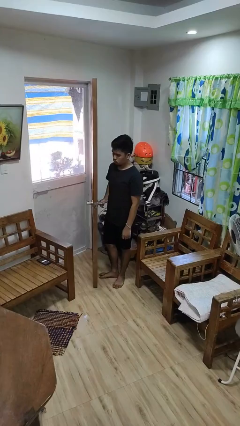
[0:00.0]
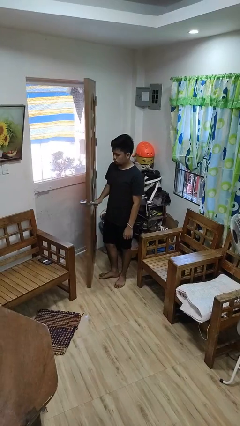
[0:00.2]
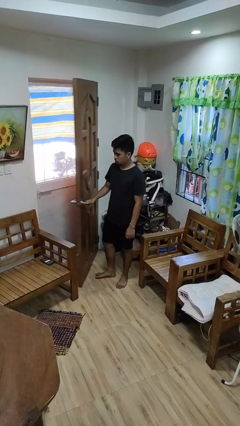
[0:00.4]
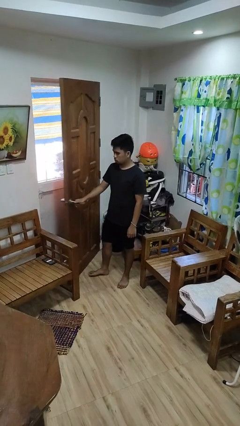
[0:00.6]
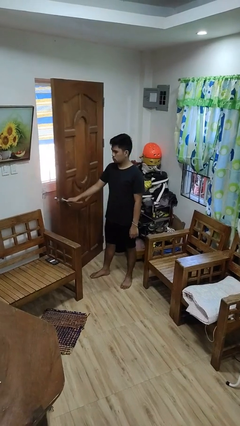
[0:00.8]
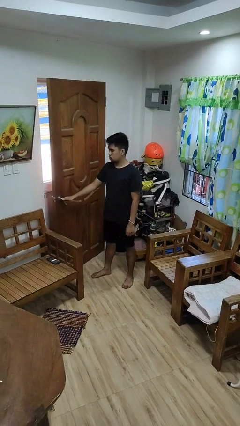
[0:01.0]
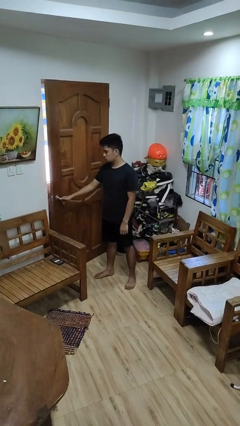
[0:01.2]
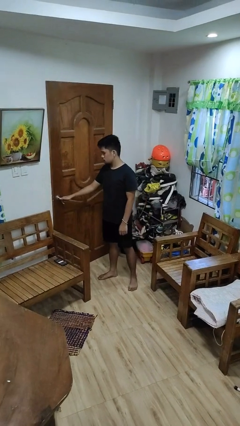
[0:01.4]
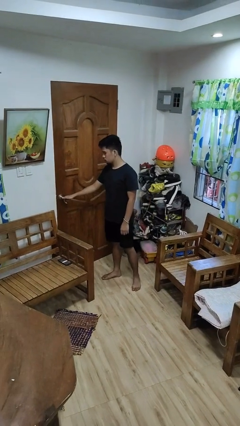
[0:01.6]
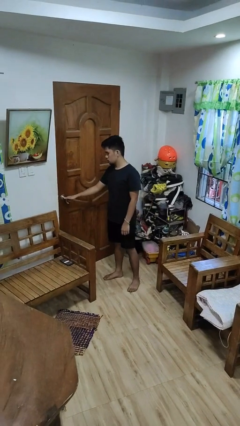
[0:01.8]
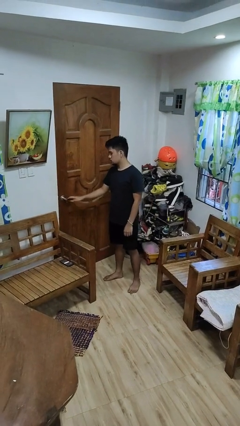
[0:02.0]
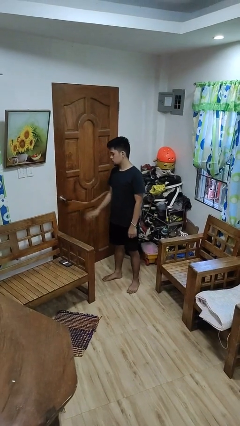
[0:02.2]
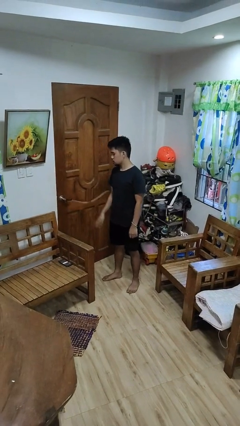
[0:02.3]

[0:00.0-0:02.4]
person closes facility door

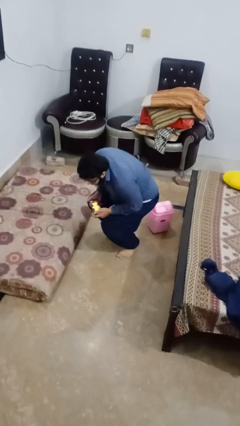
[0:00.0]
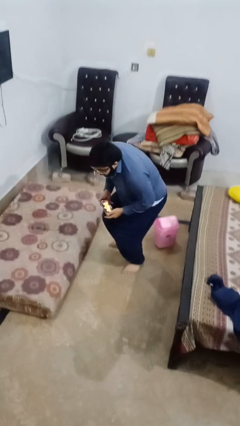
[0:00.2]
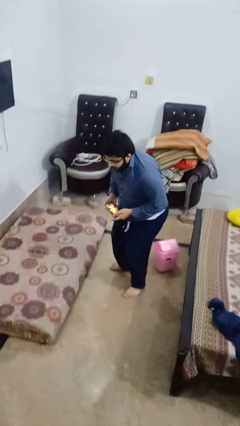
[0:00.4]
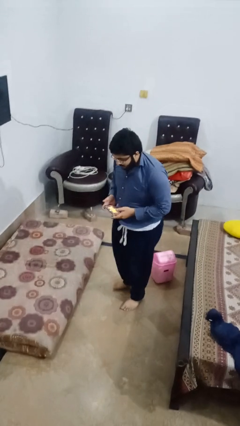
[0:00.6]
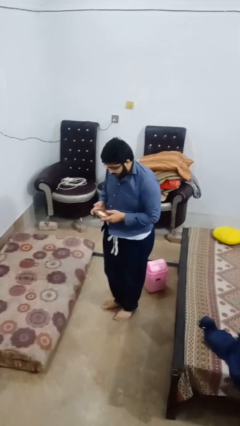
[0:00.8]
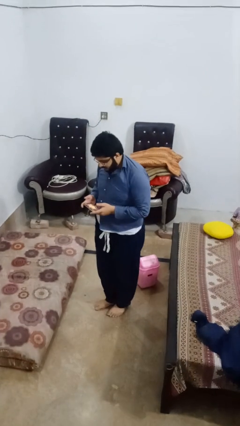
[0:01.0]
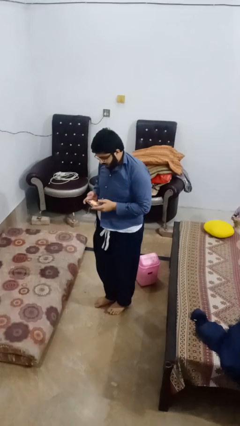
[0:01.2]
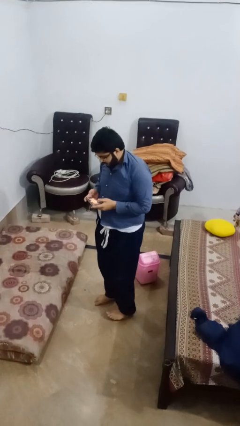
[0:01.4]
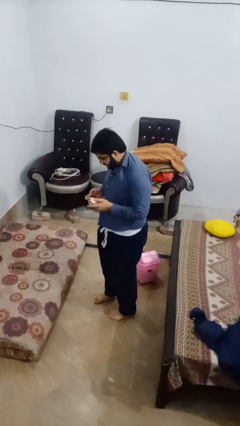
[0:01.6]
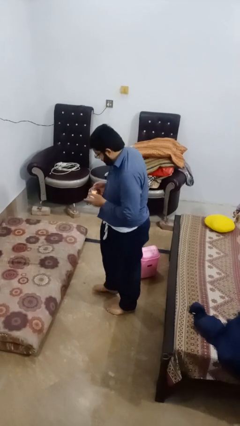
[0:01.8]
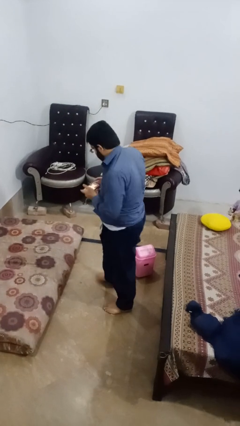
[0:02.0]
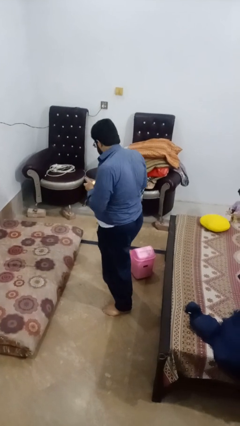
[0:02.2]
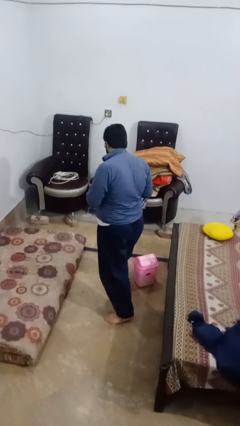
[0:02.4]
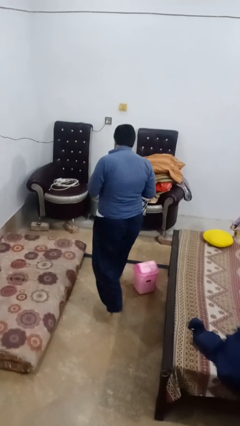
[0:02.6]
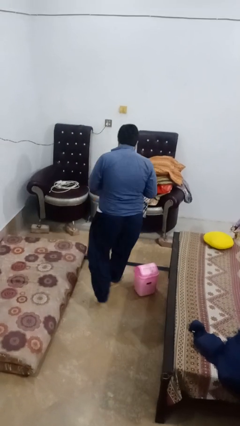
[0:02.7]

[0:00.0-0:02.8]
person stands up from floor

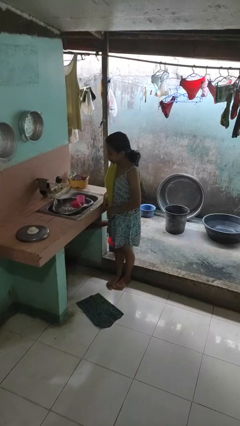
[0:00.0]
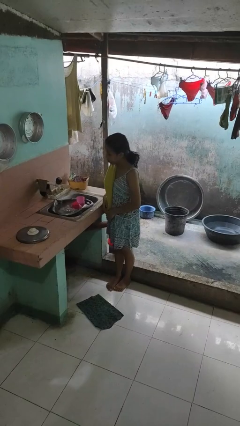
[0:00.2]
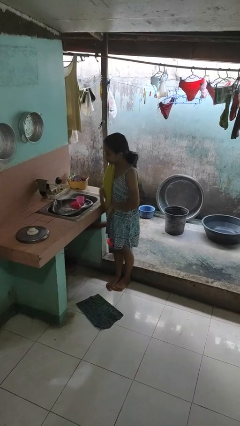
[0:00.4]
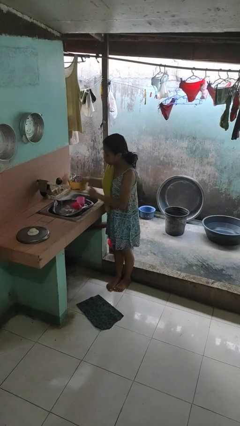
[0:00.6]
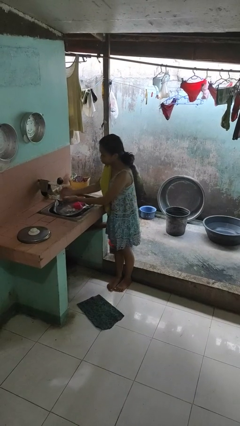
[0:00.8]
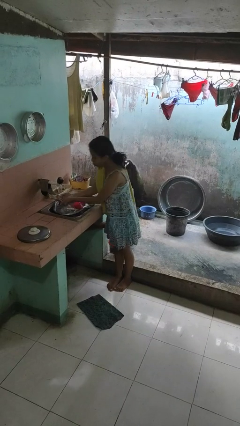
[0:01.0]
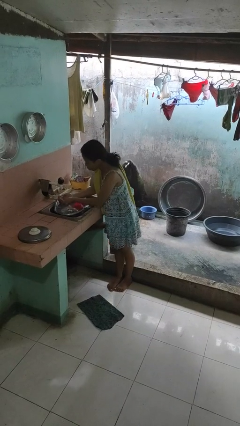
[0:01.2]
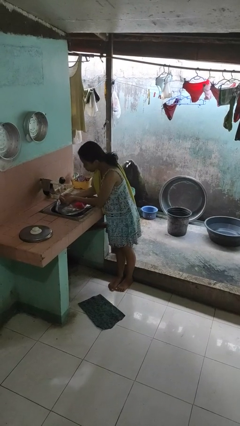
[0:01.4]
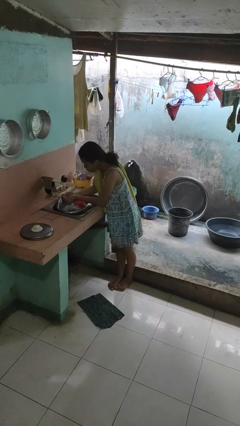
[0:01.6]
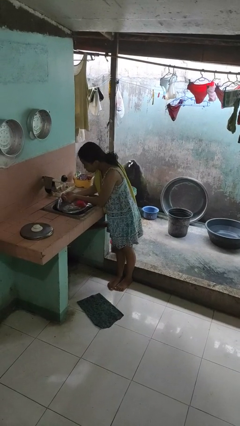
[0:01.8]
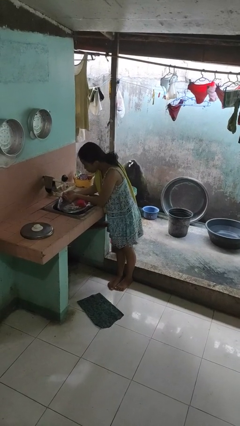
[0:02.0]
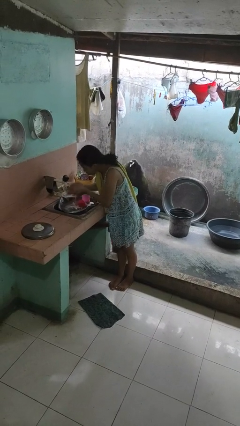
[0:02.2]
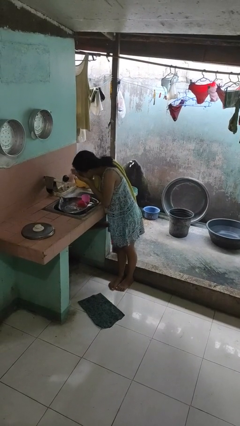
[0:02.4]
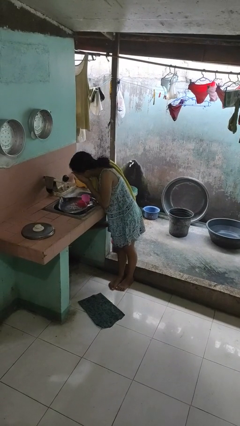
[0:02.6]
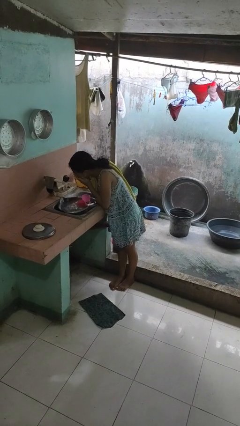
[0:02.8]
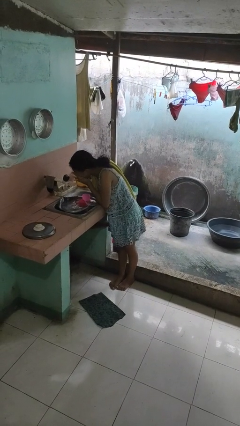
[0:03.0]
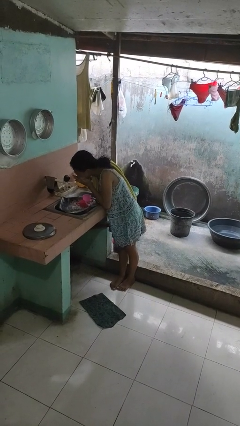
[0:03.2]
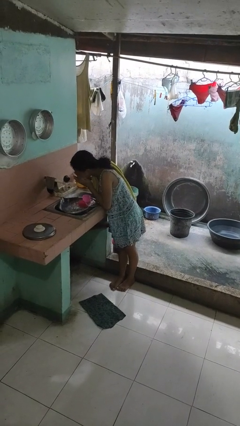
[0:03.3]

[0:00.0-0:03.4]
person washes face

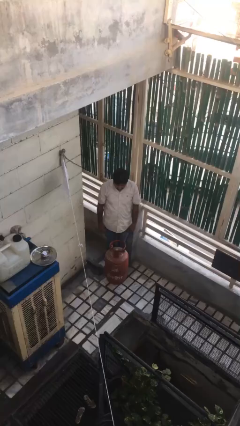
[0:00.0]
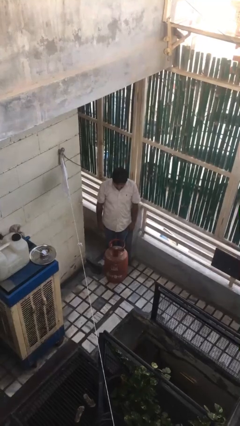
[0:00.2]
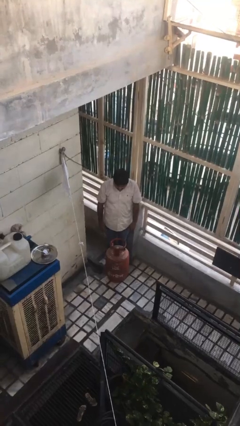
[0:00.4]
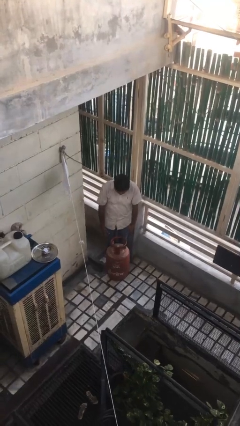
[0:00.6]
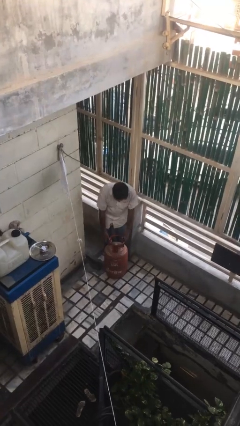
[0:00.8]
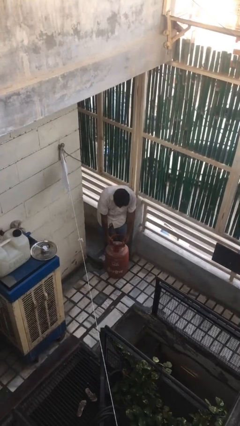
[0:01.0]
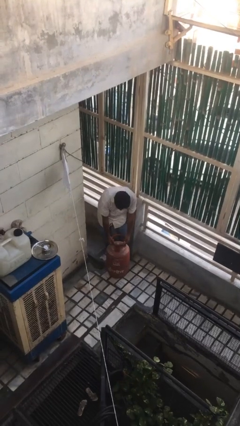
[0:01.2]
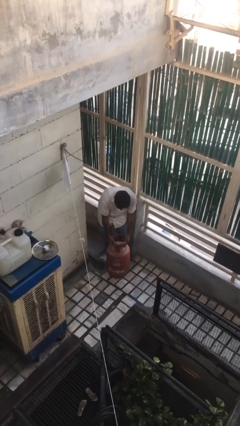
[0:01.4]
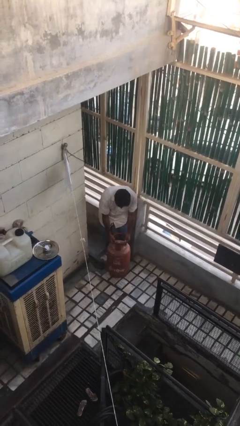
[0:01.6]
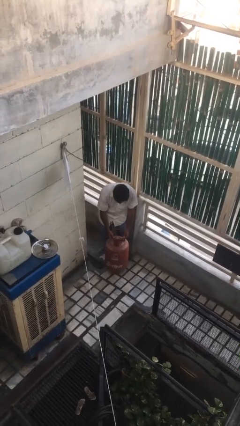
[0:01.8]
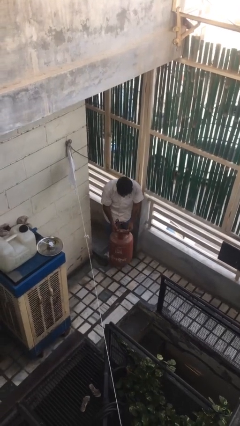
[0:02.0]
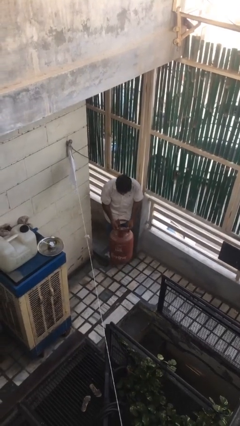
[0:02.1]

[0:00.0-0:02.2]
person picks up object from floor

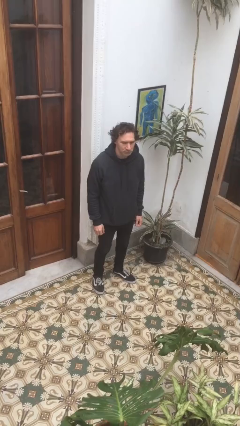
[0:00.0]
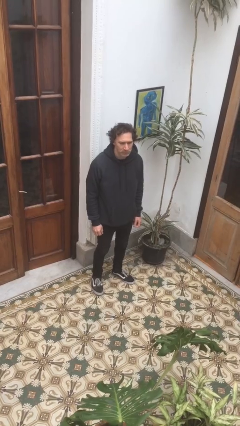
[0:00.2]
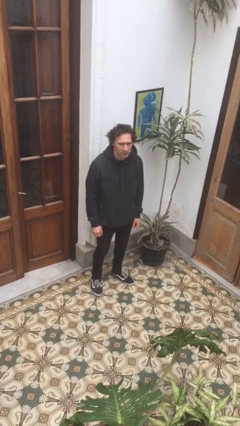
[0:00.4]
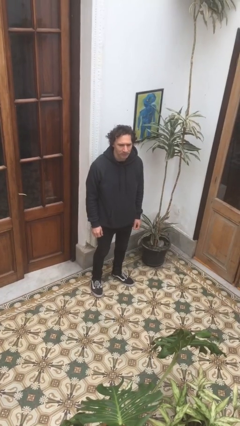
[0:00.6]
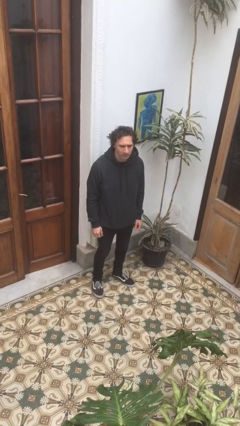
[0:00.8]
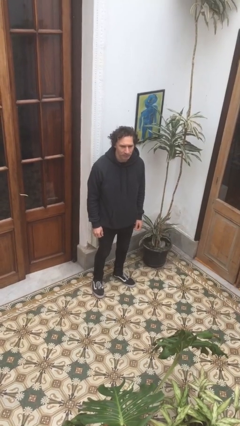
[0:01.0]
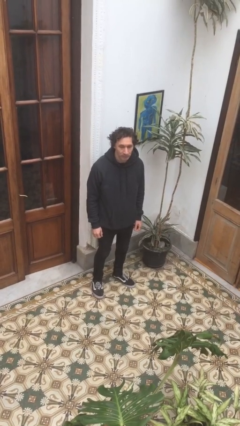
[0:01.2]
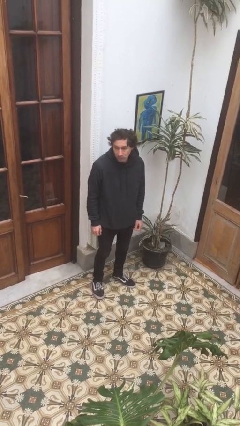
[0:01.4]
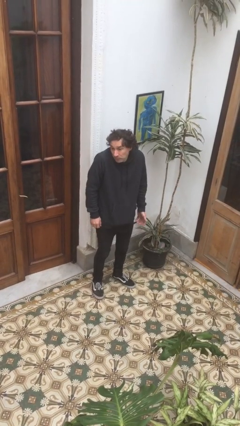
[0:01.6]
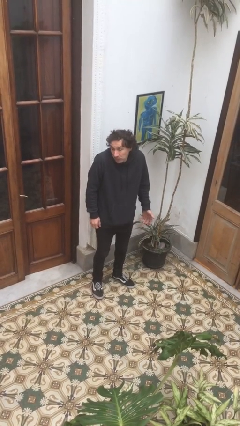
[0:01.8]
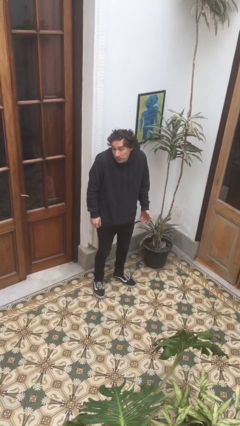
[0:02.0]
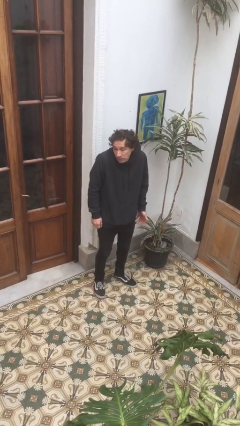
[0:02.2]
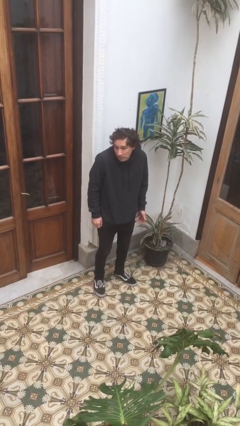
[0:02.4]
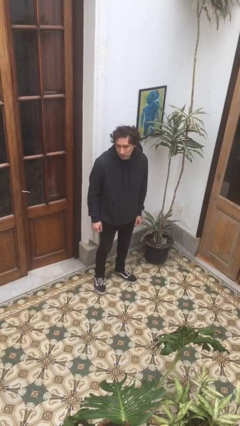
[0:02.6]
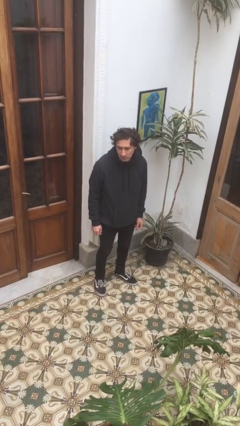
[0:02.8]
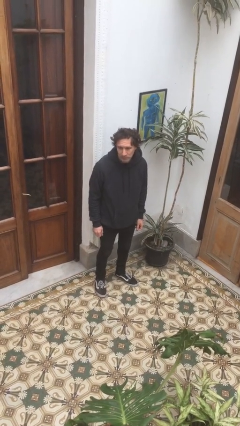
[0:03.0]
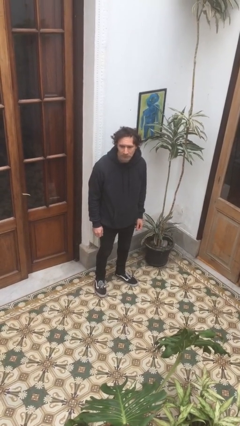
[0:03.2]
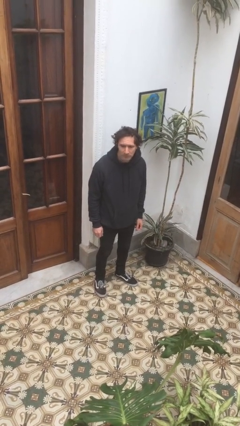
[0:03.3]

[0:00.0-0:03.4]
person shrugs

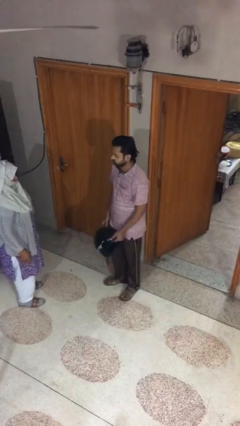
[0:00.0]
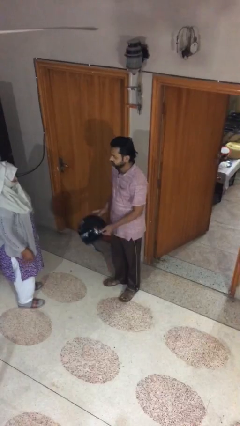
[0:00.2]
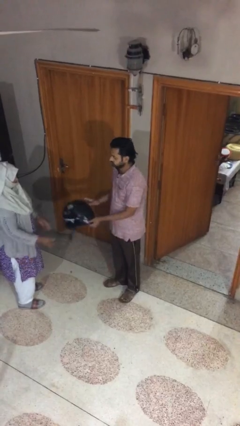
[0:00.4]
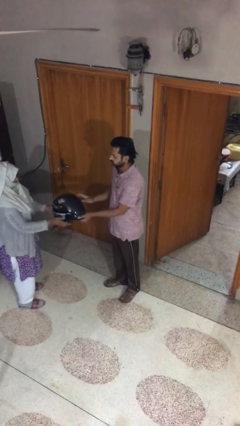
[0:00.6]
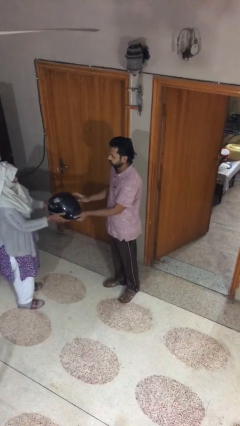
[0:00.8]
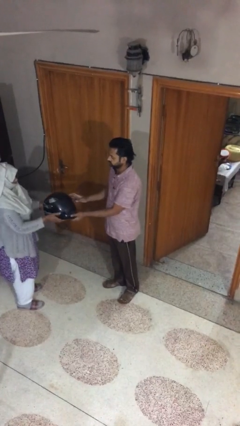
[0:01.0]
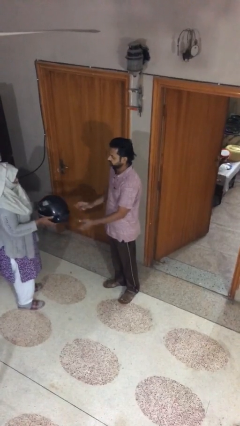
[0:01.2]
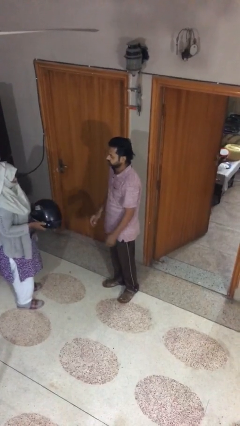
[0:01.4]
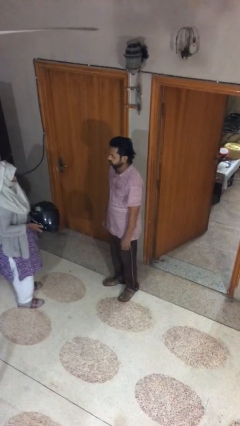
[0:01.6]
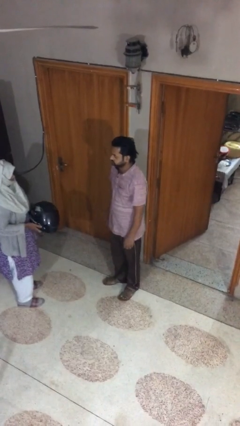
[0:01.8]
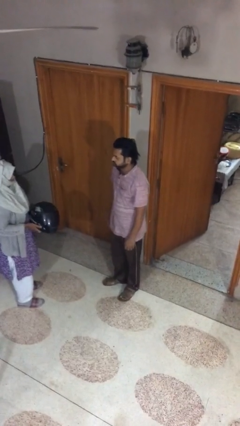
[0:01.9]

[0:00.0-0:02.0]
person transfers object to person

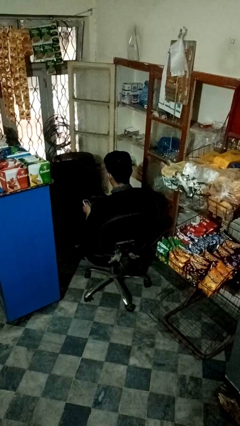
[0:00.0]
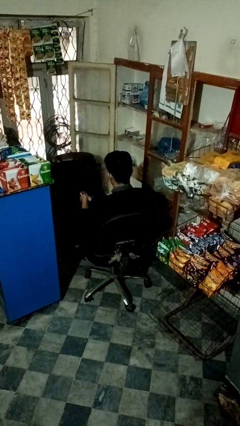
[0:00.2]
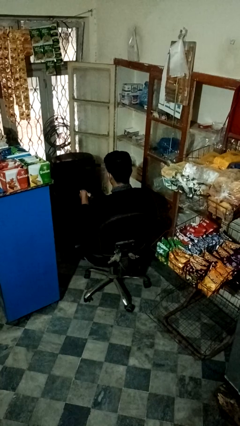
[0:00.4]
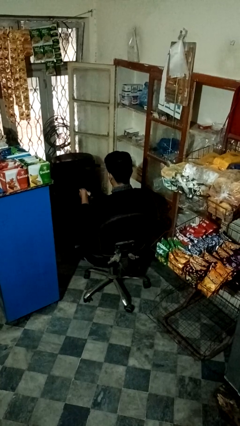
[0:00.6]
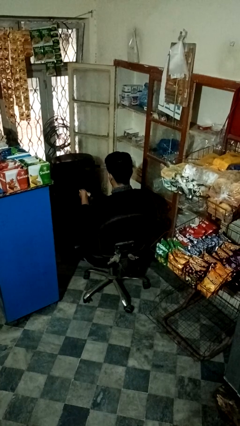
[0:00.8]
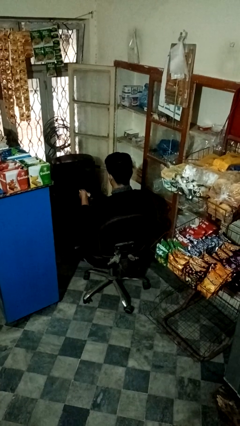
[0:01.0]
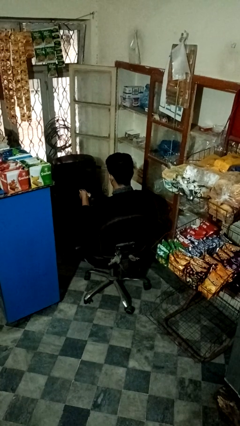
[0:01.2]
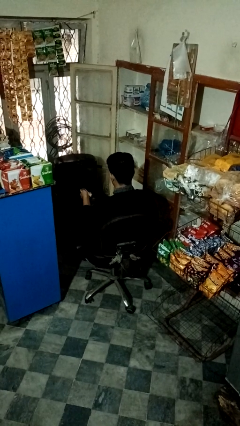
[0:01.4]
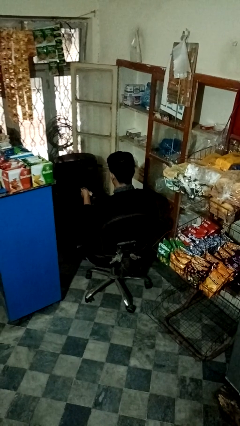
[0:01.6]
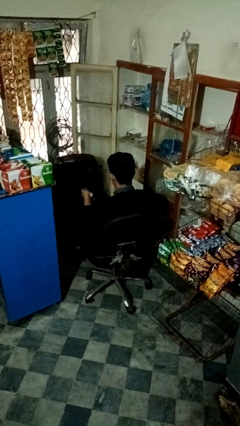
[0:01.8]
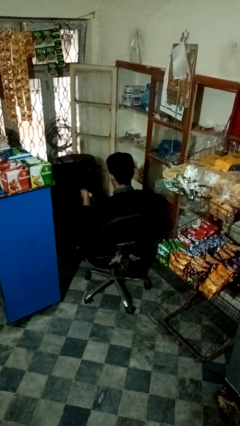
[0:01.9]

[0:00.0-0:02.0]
person uses television remote
